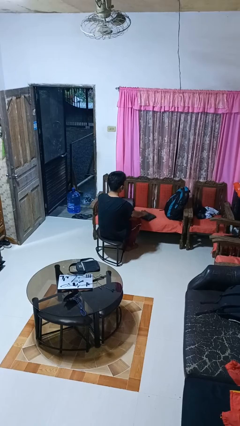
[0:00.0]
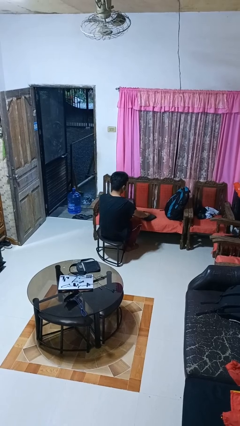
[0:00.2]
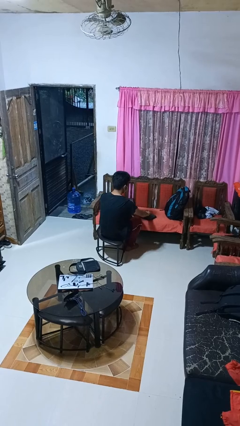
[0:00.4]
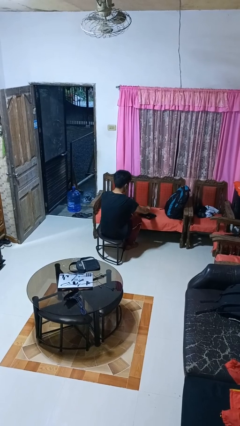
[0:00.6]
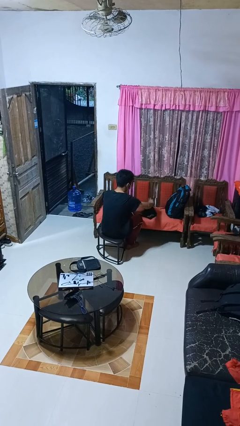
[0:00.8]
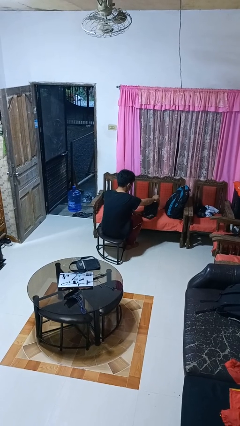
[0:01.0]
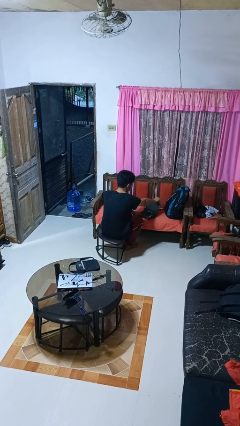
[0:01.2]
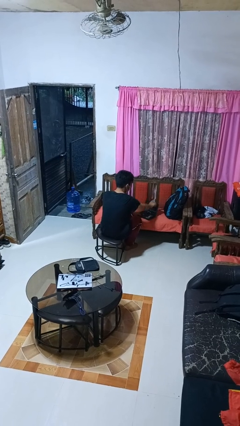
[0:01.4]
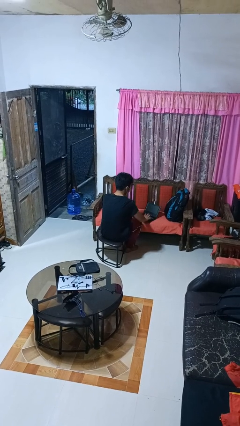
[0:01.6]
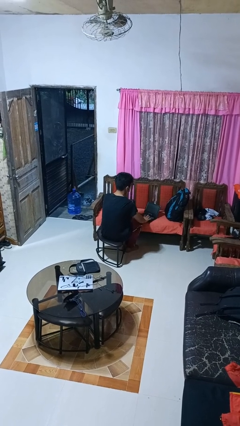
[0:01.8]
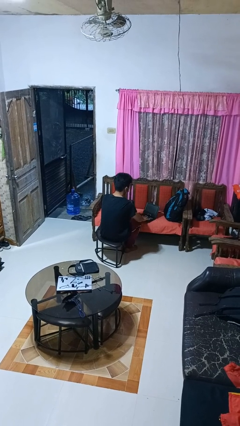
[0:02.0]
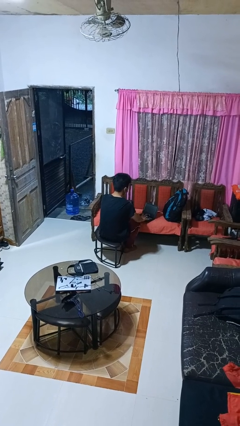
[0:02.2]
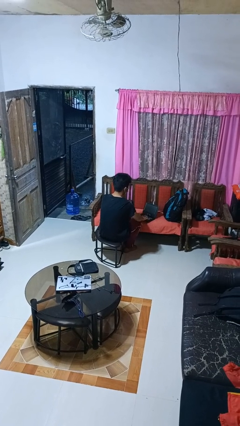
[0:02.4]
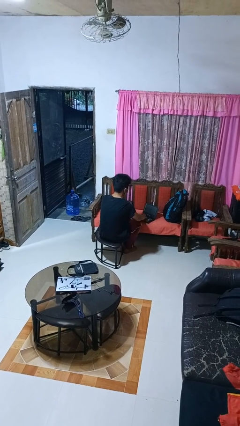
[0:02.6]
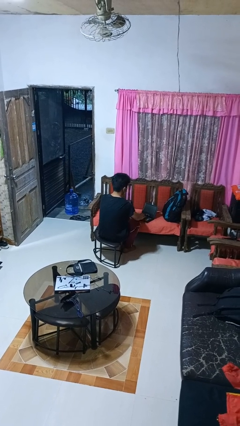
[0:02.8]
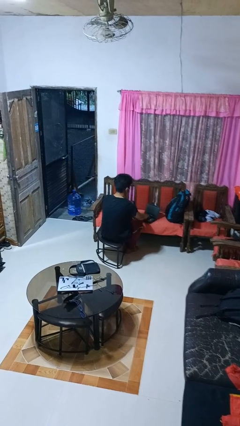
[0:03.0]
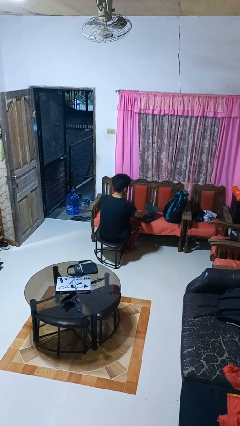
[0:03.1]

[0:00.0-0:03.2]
person opens laptop

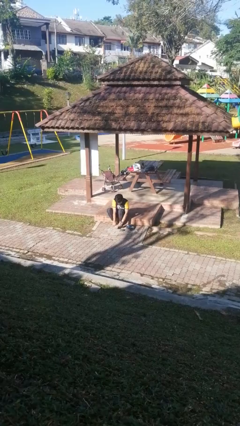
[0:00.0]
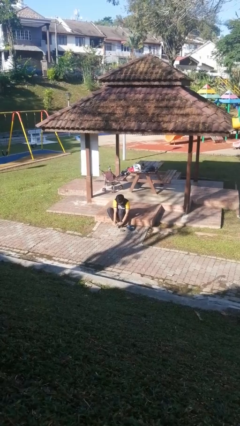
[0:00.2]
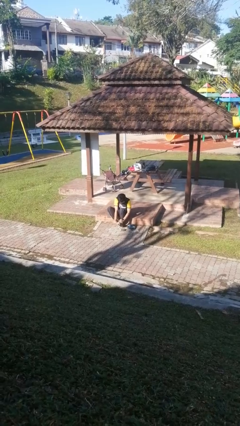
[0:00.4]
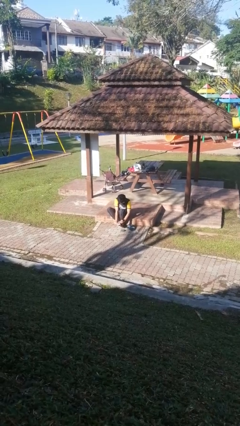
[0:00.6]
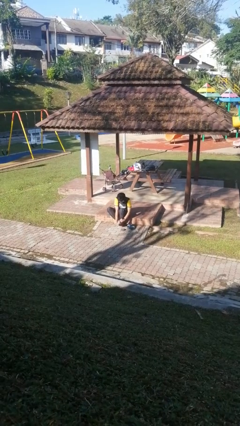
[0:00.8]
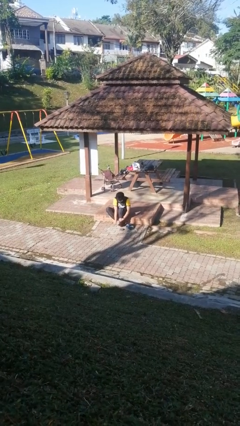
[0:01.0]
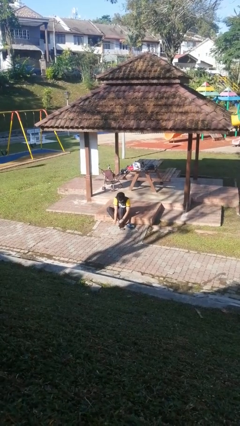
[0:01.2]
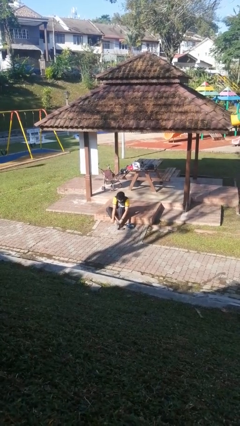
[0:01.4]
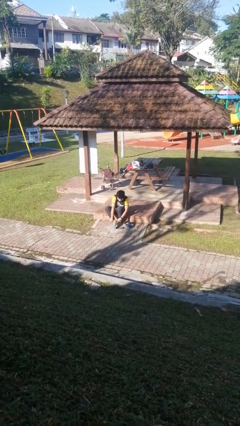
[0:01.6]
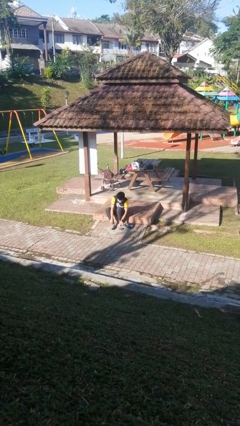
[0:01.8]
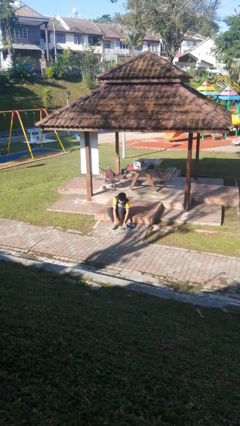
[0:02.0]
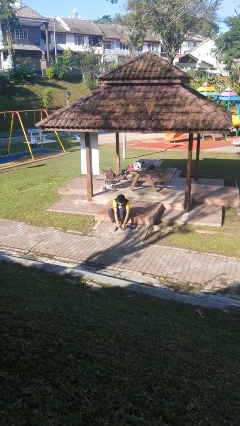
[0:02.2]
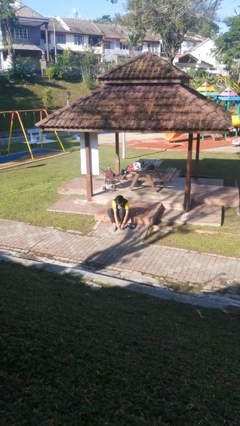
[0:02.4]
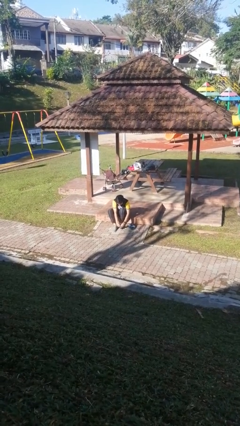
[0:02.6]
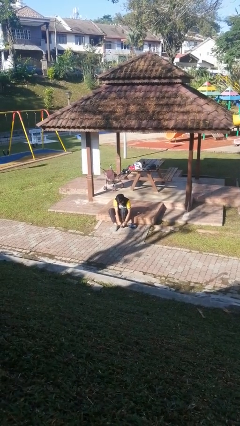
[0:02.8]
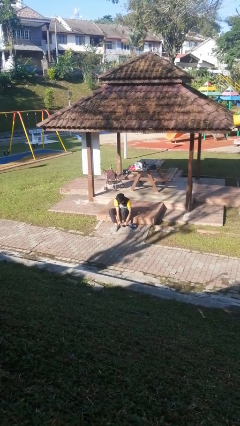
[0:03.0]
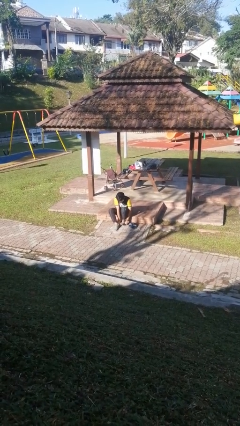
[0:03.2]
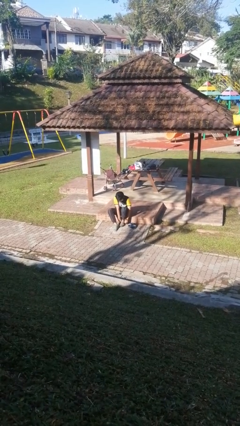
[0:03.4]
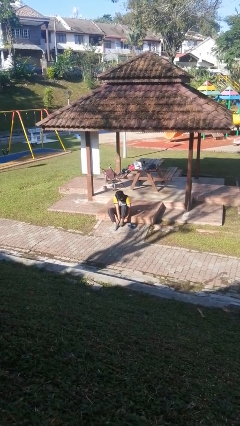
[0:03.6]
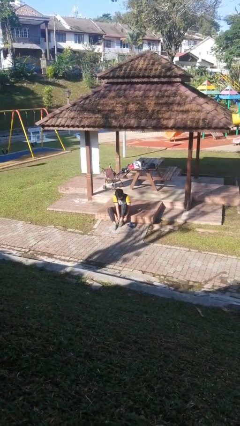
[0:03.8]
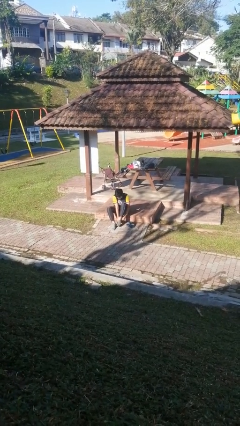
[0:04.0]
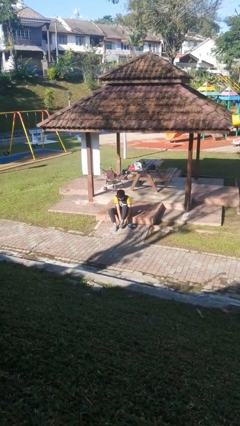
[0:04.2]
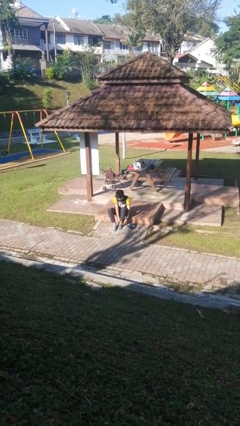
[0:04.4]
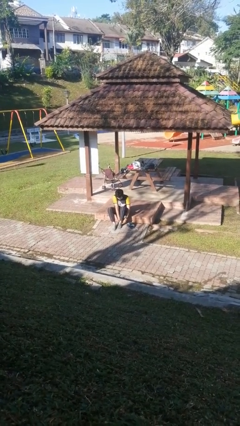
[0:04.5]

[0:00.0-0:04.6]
person puts on socks

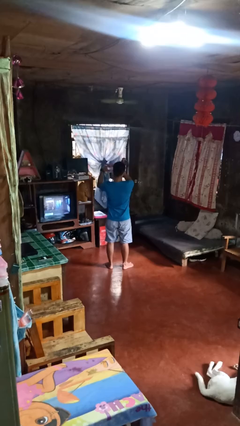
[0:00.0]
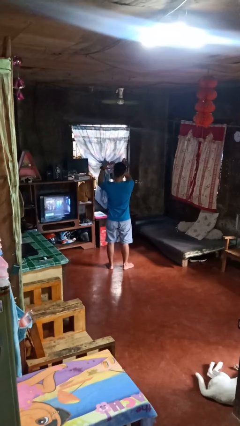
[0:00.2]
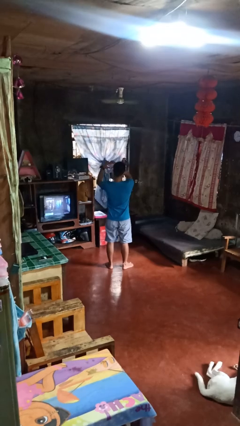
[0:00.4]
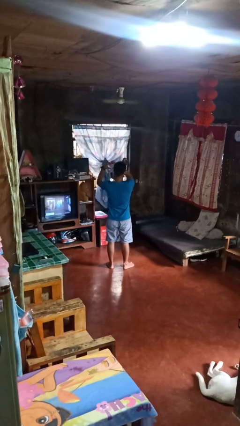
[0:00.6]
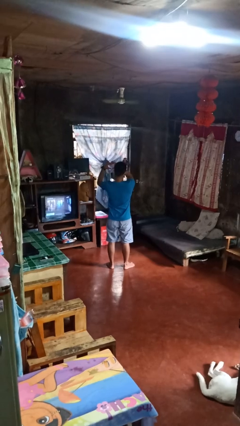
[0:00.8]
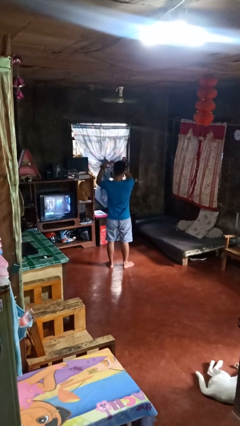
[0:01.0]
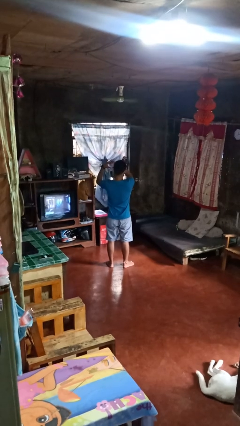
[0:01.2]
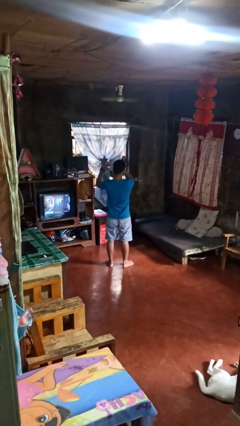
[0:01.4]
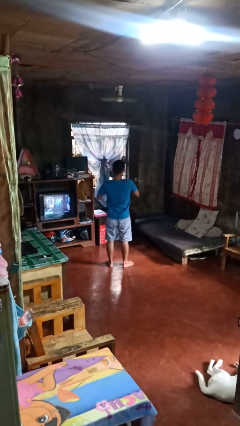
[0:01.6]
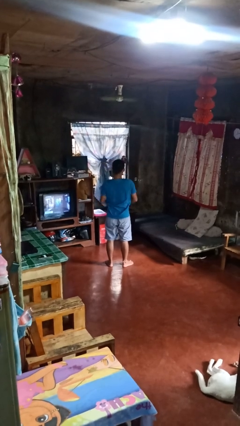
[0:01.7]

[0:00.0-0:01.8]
person gestures heart

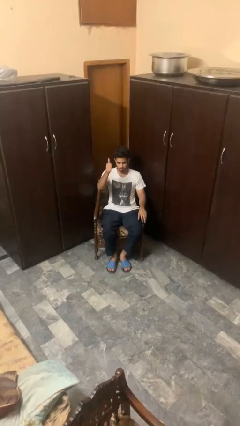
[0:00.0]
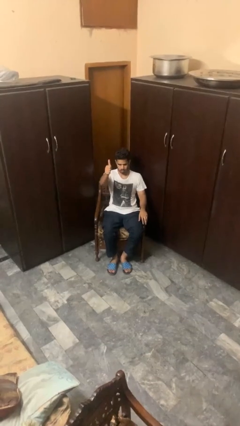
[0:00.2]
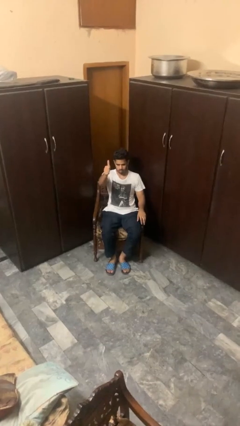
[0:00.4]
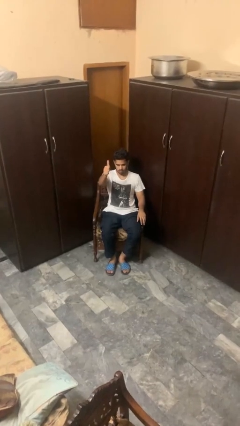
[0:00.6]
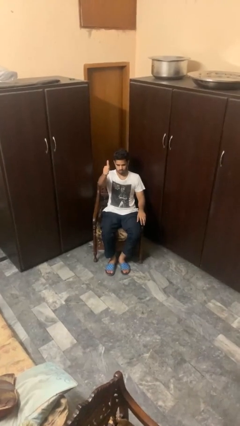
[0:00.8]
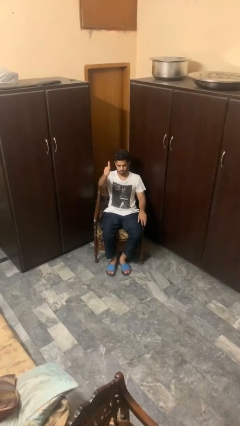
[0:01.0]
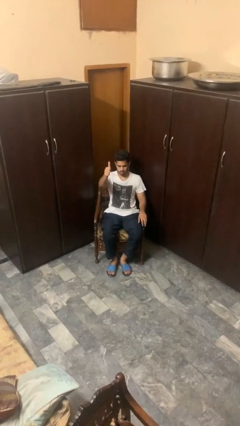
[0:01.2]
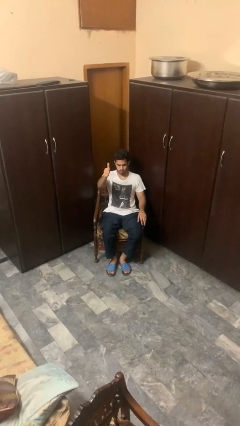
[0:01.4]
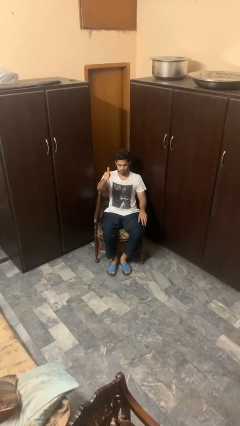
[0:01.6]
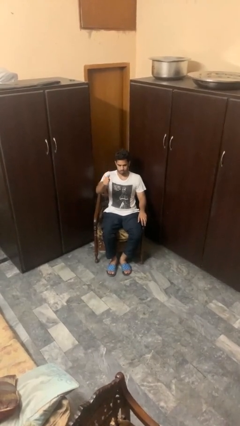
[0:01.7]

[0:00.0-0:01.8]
person gestures thumbs up

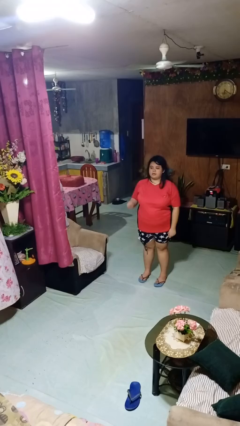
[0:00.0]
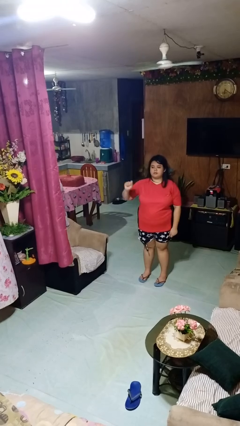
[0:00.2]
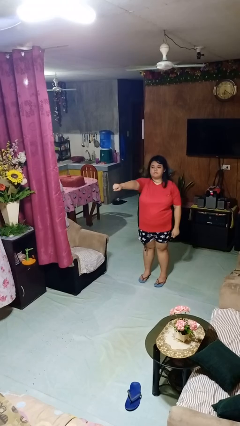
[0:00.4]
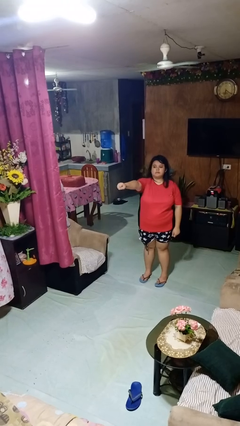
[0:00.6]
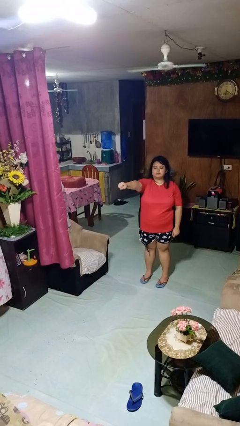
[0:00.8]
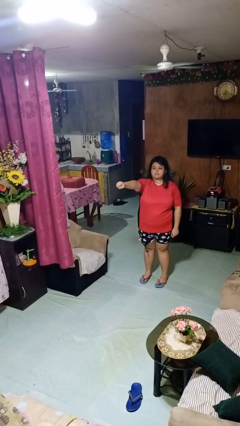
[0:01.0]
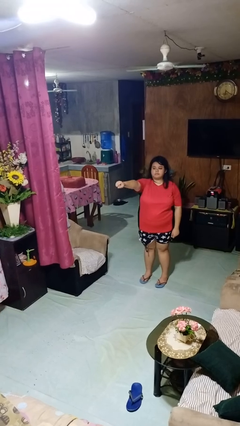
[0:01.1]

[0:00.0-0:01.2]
person punches

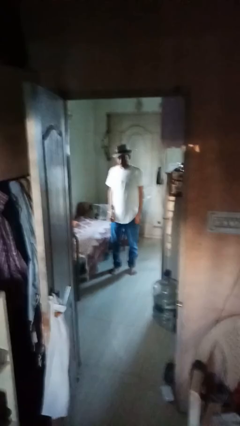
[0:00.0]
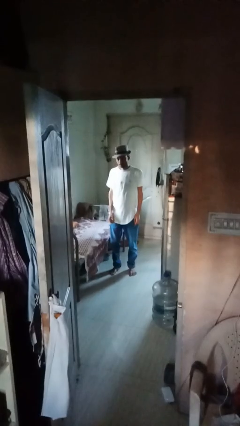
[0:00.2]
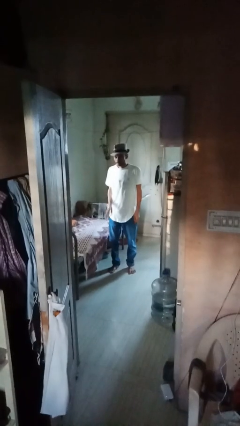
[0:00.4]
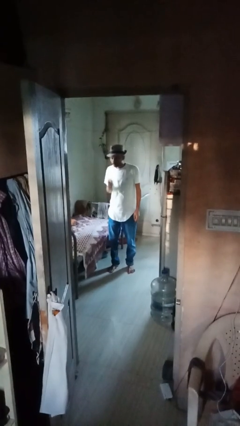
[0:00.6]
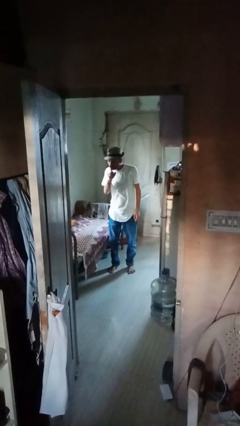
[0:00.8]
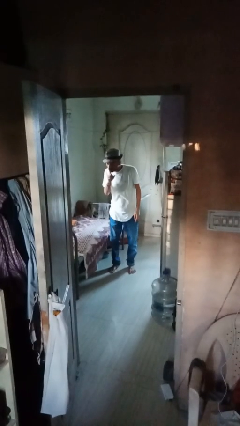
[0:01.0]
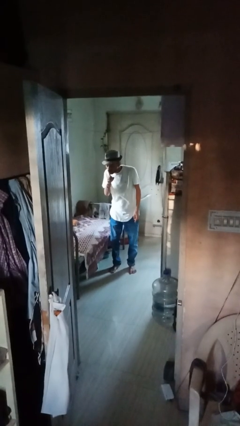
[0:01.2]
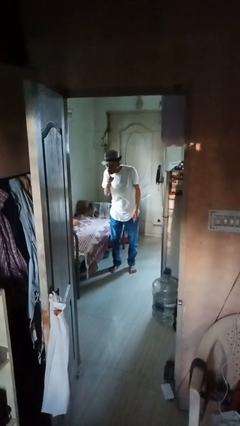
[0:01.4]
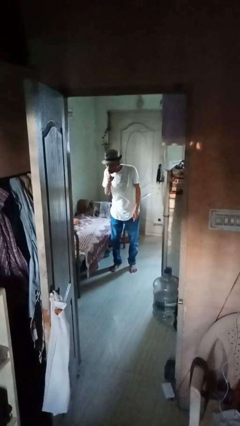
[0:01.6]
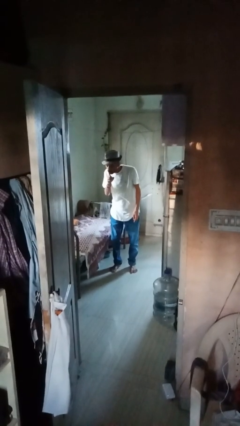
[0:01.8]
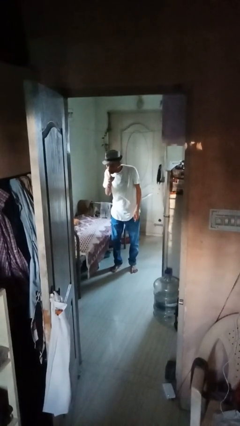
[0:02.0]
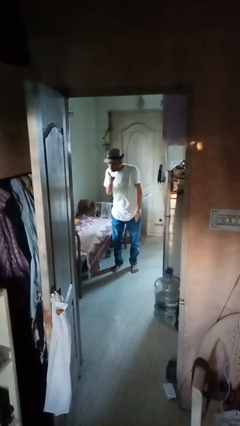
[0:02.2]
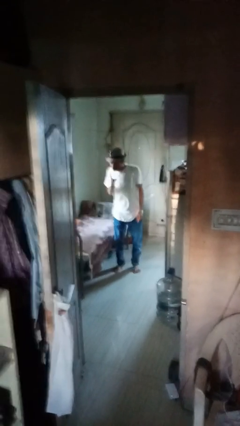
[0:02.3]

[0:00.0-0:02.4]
person gestures be quiet

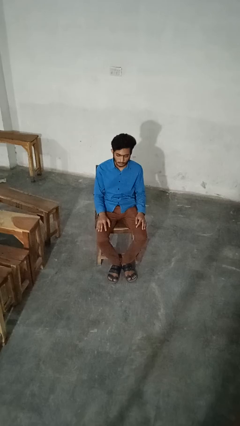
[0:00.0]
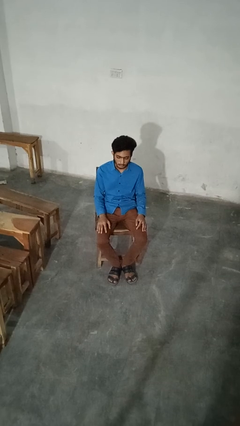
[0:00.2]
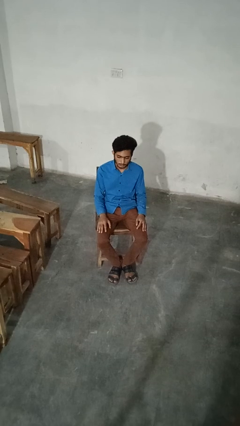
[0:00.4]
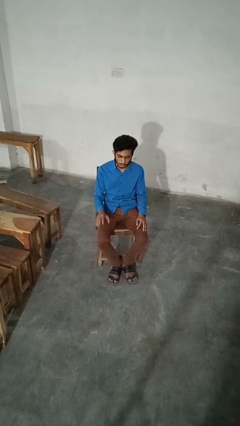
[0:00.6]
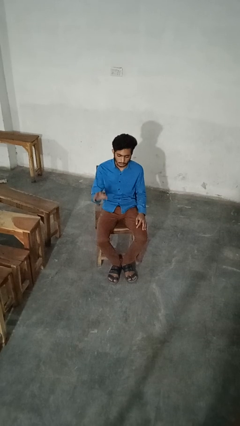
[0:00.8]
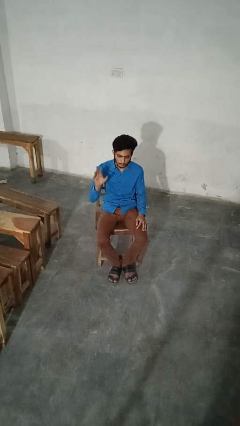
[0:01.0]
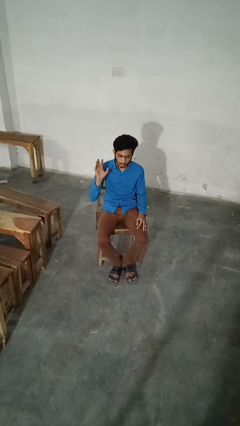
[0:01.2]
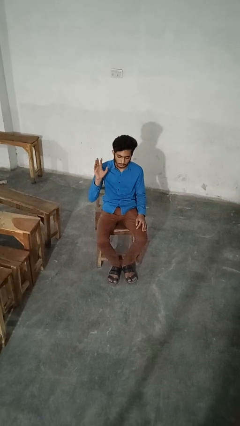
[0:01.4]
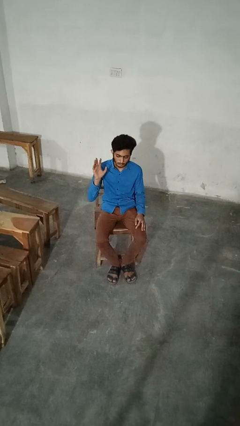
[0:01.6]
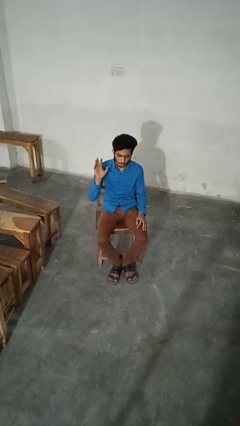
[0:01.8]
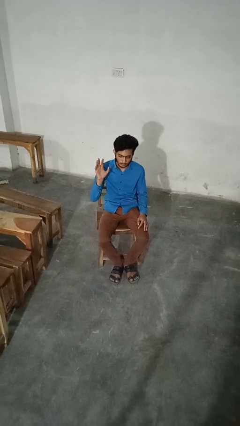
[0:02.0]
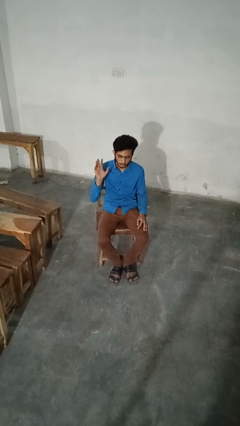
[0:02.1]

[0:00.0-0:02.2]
person gestures raise hand
